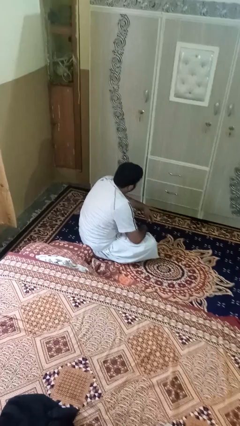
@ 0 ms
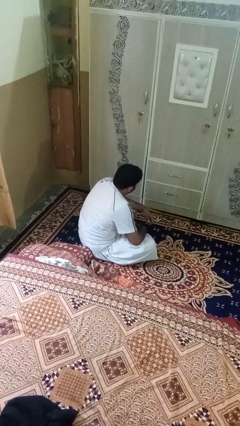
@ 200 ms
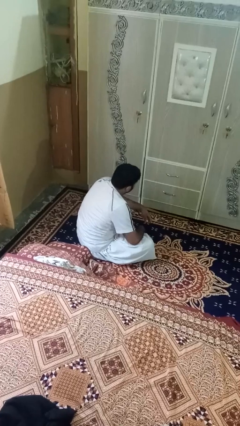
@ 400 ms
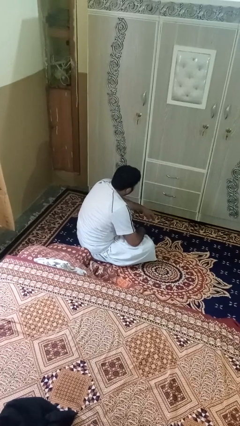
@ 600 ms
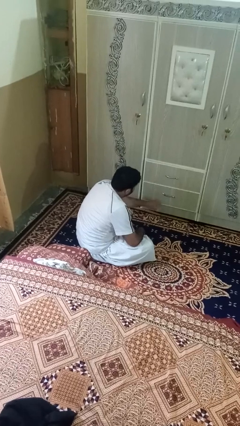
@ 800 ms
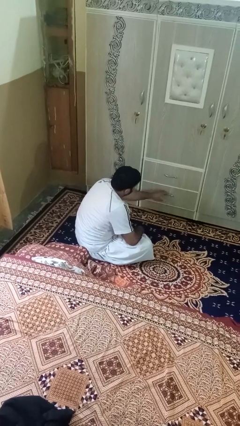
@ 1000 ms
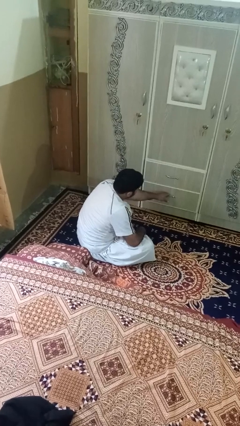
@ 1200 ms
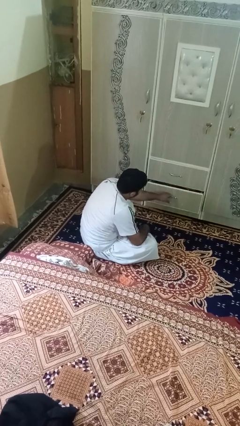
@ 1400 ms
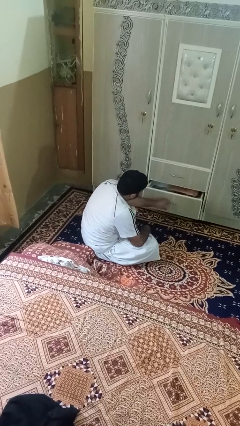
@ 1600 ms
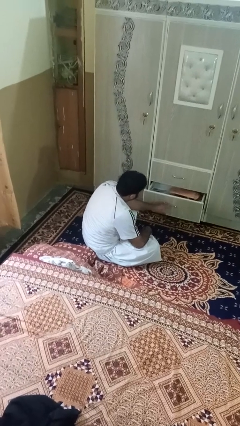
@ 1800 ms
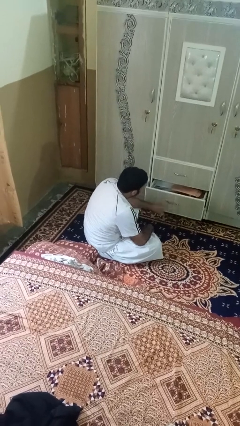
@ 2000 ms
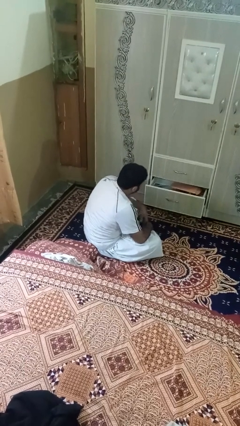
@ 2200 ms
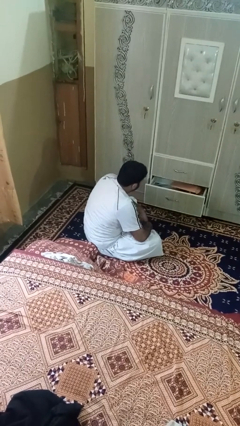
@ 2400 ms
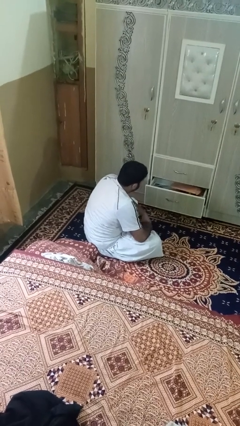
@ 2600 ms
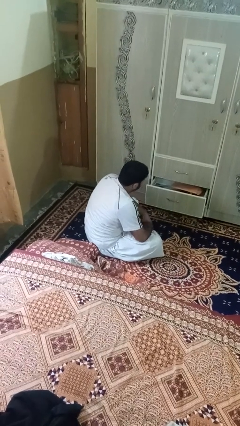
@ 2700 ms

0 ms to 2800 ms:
person opens dresser drawer

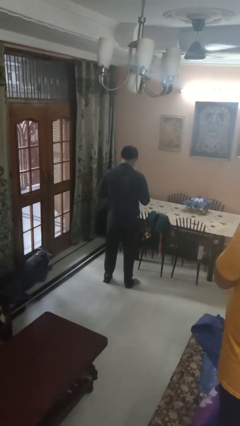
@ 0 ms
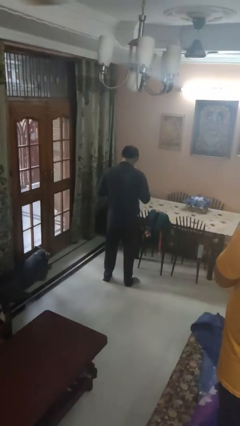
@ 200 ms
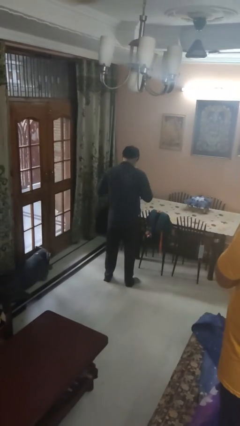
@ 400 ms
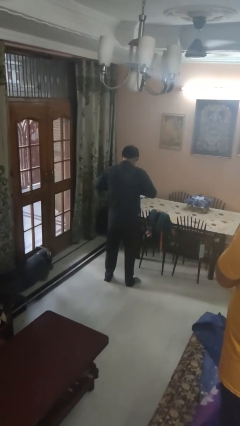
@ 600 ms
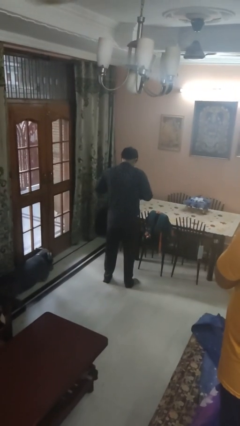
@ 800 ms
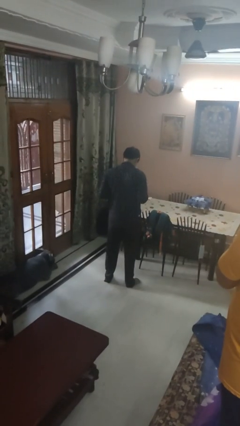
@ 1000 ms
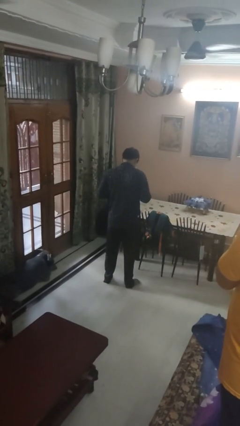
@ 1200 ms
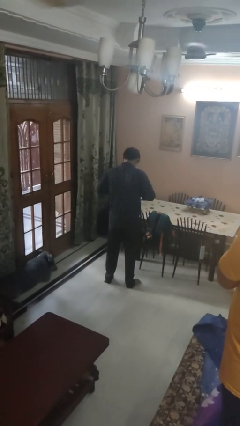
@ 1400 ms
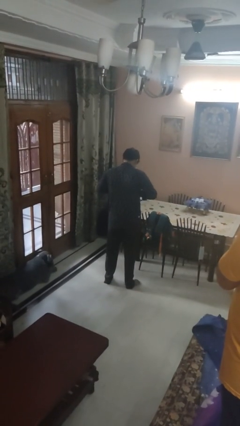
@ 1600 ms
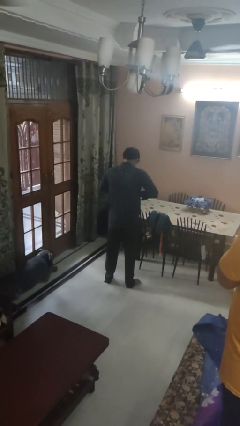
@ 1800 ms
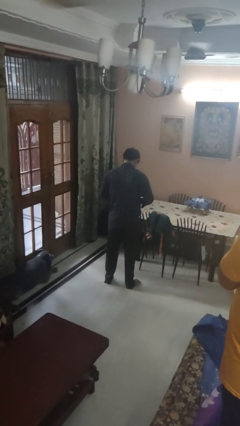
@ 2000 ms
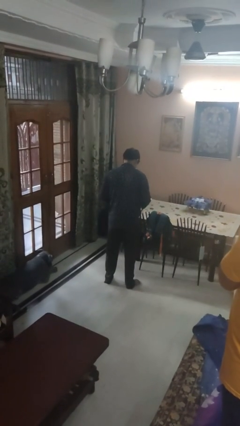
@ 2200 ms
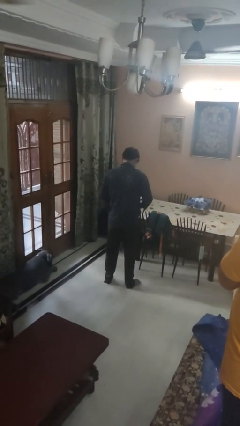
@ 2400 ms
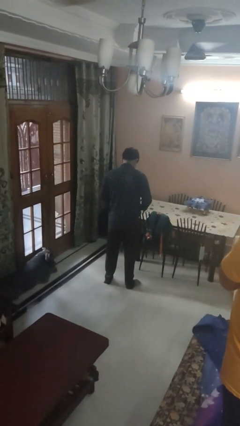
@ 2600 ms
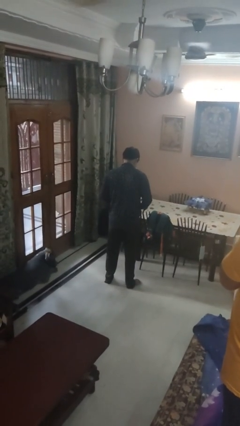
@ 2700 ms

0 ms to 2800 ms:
person buttons shirt

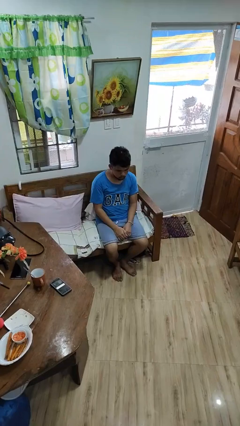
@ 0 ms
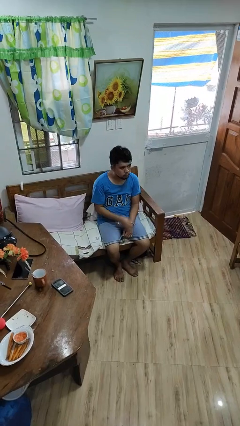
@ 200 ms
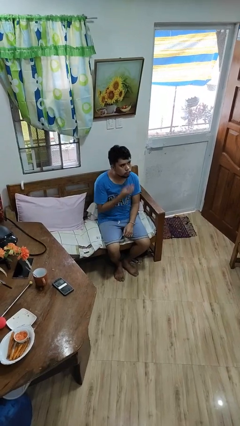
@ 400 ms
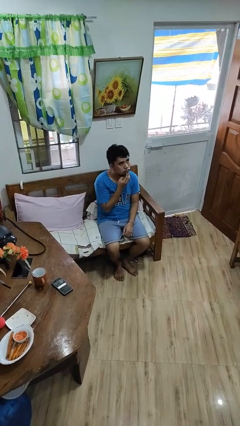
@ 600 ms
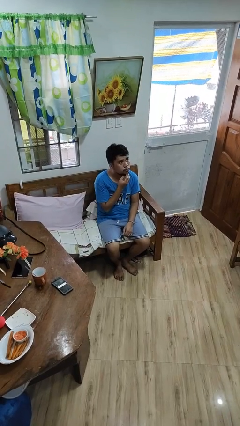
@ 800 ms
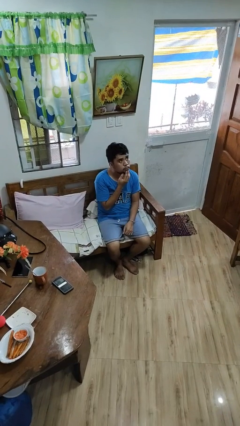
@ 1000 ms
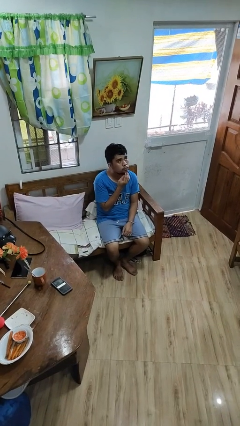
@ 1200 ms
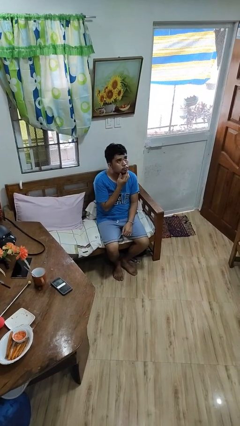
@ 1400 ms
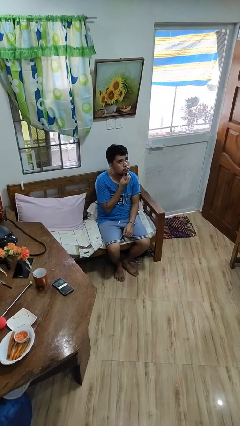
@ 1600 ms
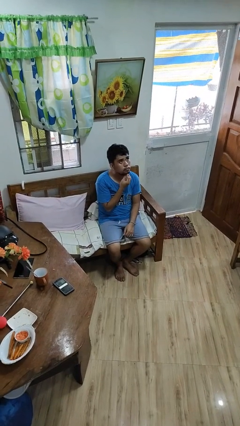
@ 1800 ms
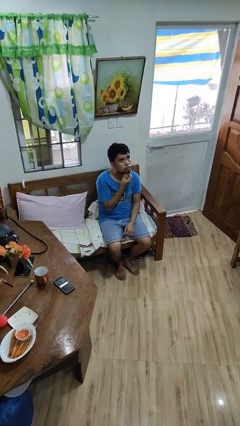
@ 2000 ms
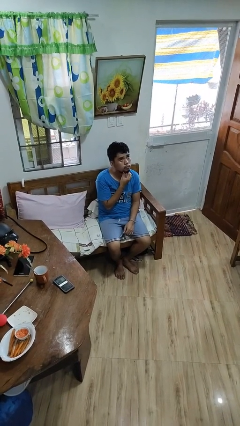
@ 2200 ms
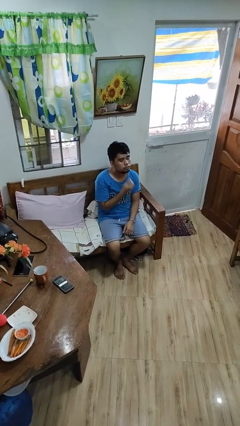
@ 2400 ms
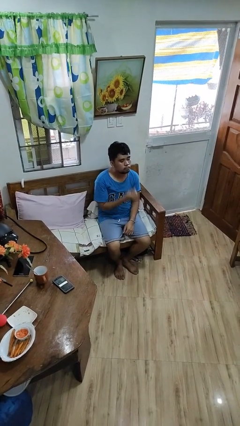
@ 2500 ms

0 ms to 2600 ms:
person strokes chin

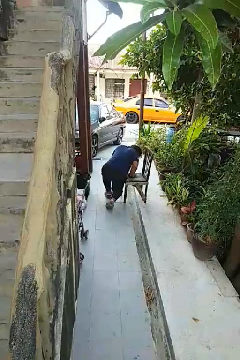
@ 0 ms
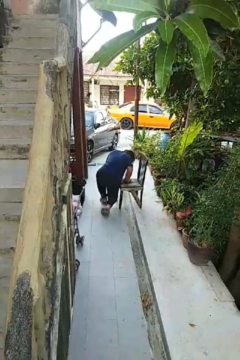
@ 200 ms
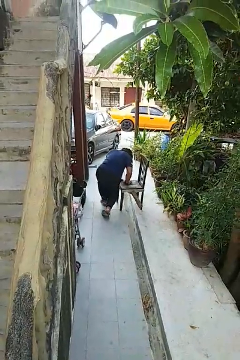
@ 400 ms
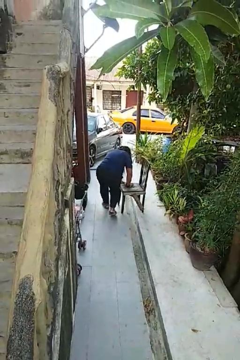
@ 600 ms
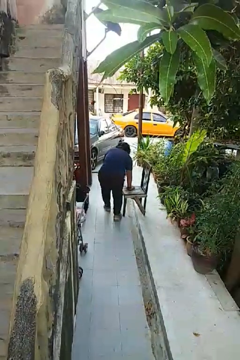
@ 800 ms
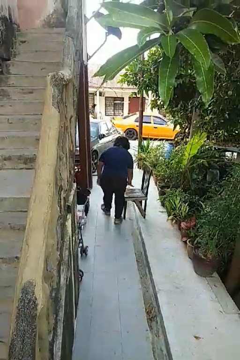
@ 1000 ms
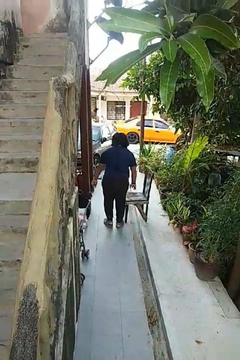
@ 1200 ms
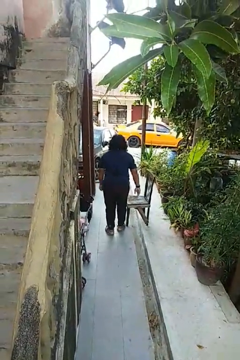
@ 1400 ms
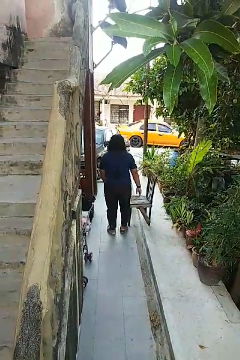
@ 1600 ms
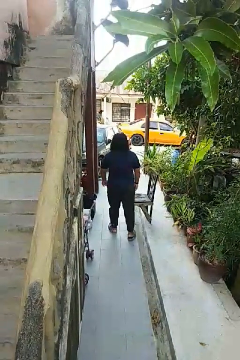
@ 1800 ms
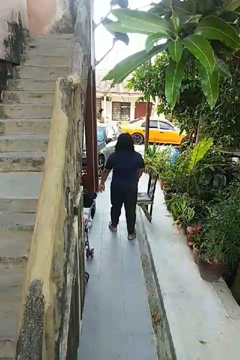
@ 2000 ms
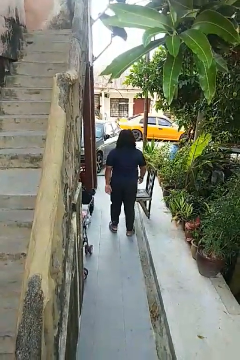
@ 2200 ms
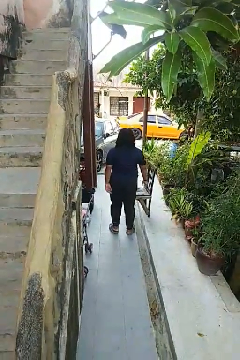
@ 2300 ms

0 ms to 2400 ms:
person stands up from floor

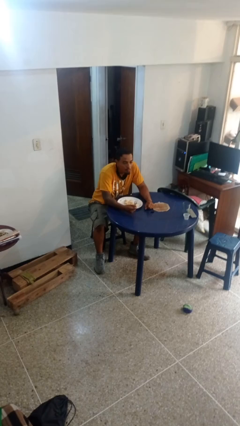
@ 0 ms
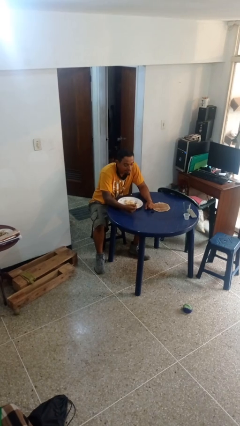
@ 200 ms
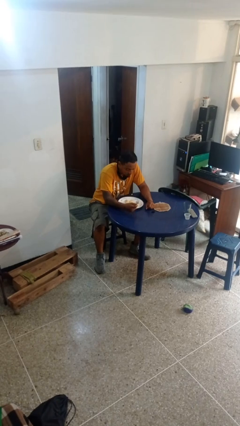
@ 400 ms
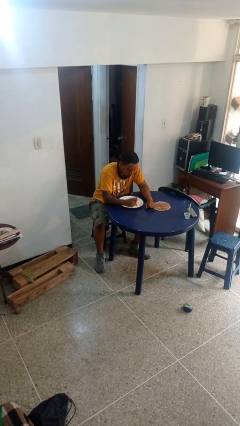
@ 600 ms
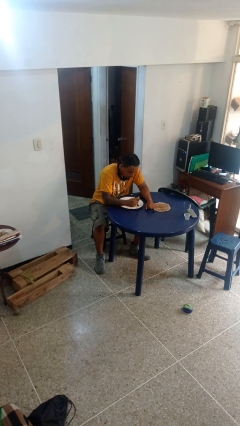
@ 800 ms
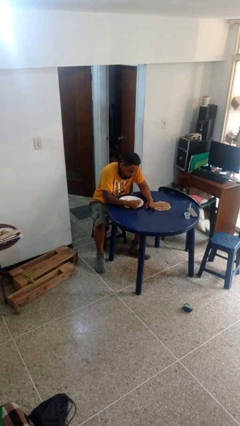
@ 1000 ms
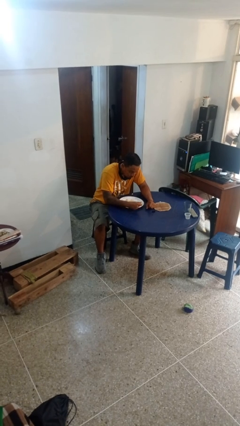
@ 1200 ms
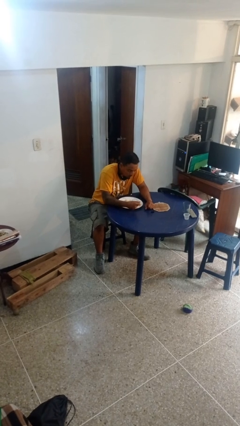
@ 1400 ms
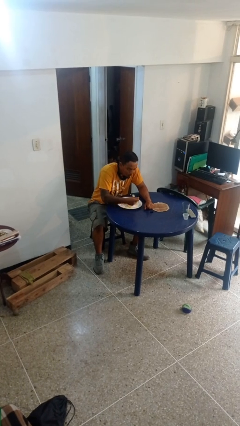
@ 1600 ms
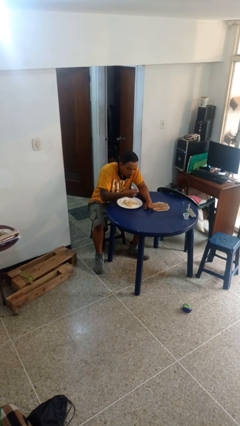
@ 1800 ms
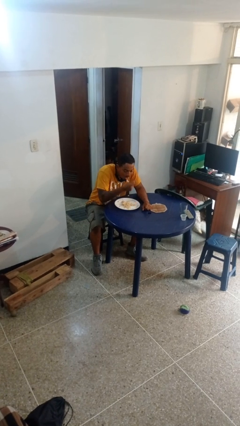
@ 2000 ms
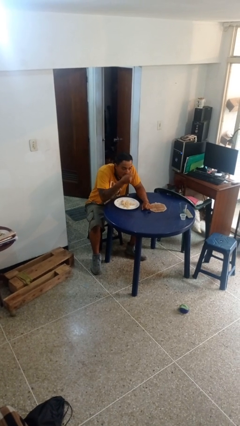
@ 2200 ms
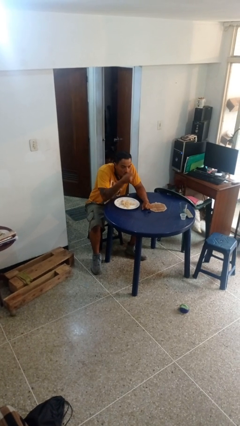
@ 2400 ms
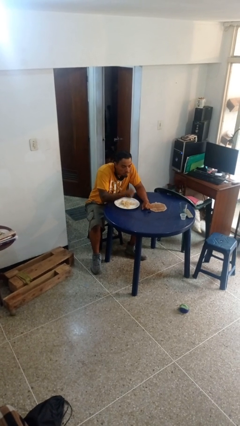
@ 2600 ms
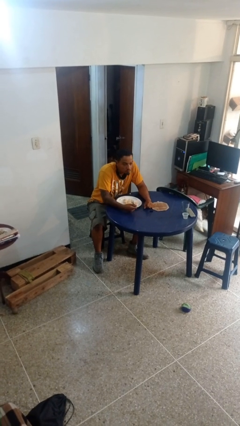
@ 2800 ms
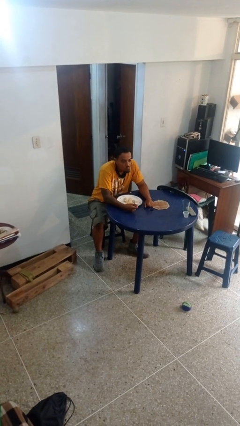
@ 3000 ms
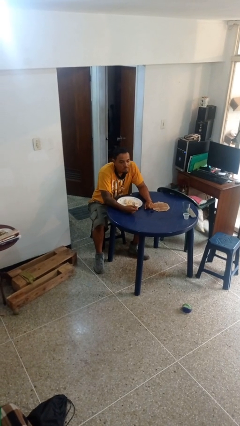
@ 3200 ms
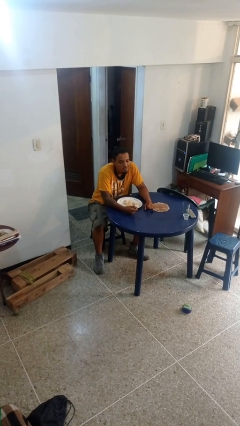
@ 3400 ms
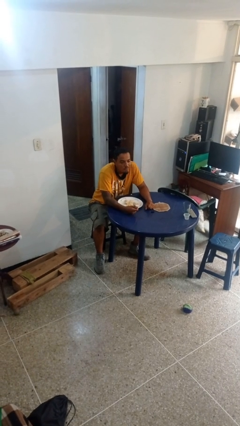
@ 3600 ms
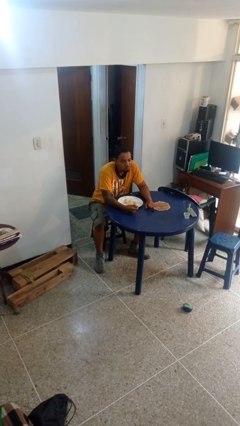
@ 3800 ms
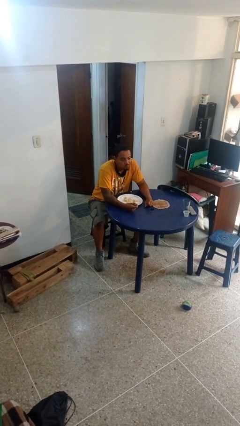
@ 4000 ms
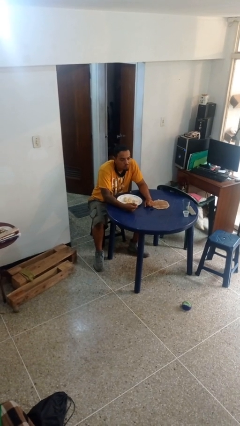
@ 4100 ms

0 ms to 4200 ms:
person eats with utensil

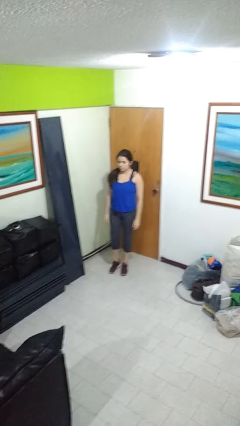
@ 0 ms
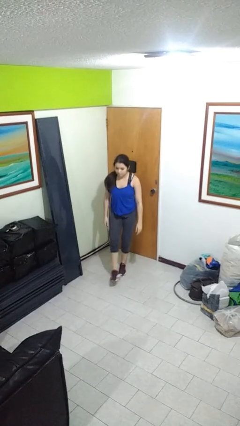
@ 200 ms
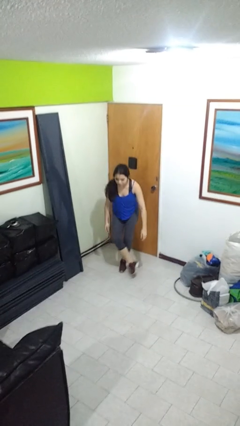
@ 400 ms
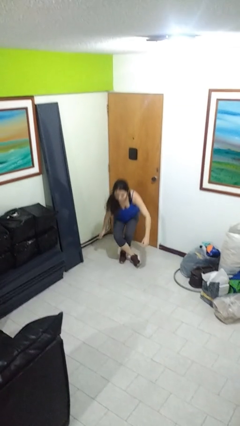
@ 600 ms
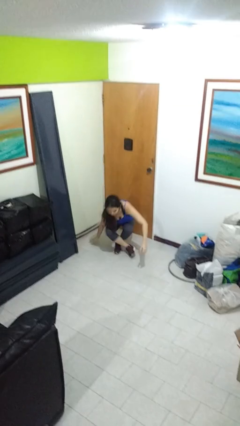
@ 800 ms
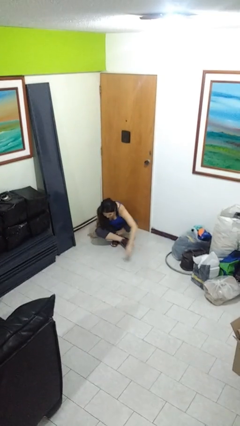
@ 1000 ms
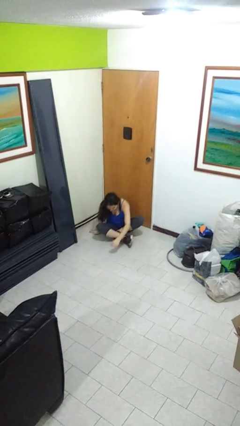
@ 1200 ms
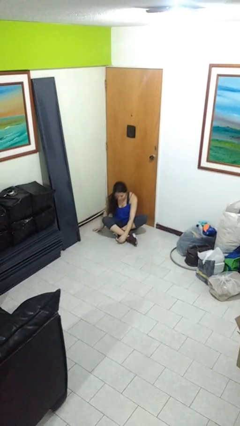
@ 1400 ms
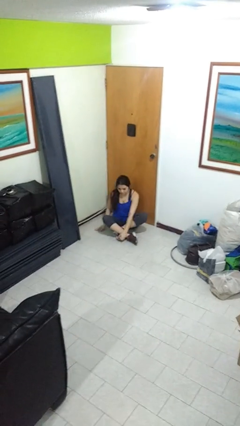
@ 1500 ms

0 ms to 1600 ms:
person sits crisscross

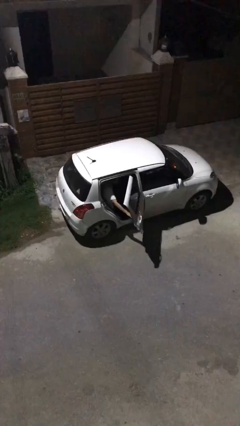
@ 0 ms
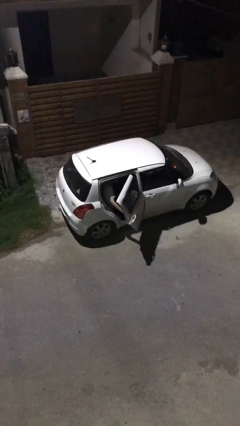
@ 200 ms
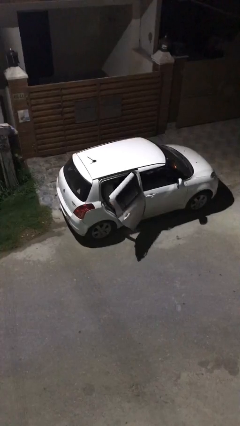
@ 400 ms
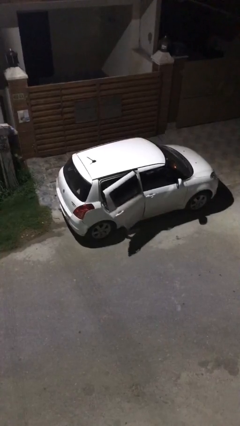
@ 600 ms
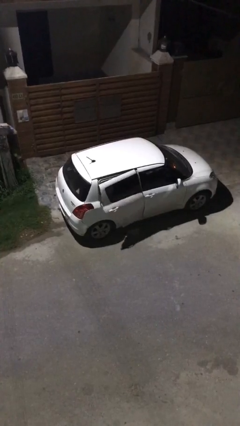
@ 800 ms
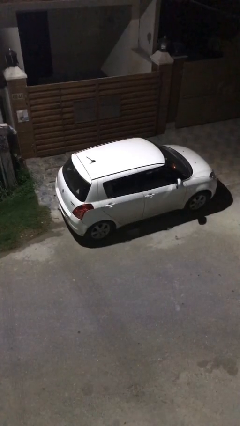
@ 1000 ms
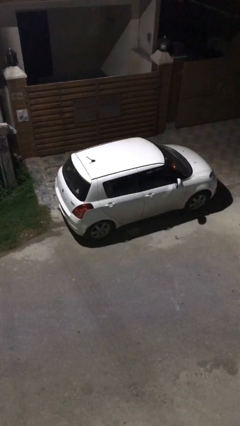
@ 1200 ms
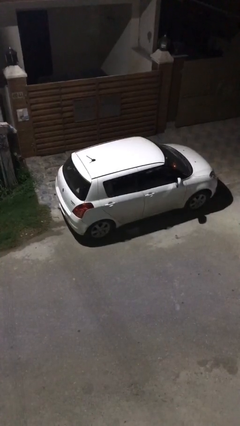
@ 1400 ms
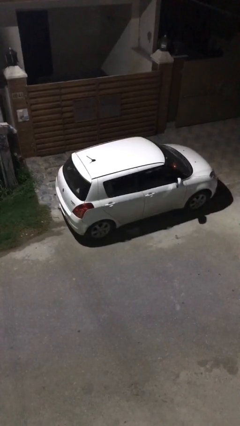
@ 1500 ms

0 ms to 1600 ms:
person closes car door
